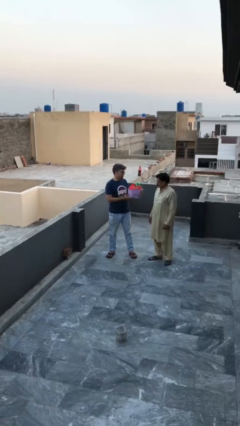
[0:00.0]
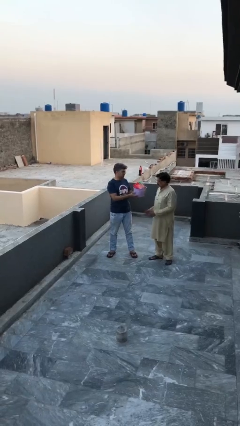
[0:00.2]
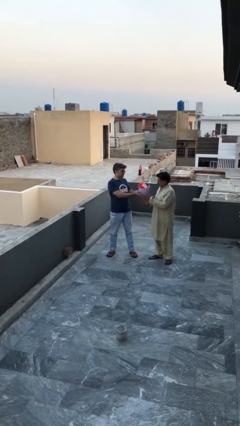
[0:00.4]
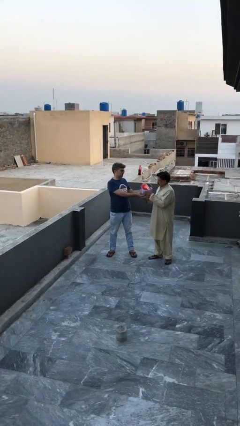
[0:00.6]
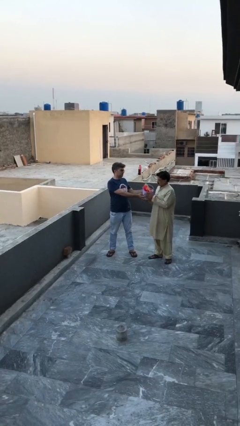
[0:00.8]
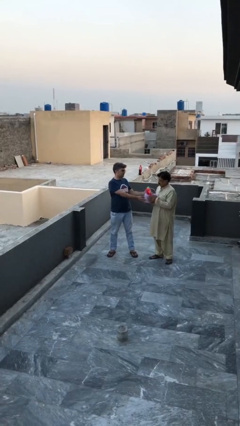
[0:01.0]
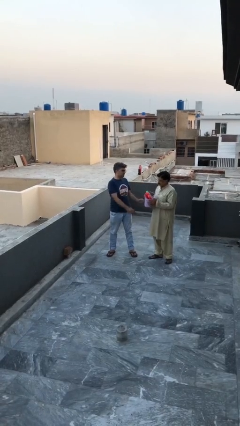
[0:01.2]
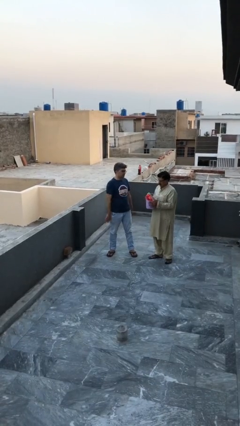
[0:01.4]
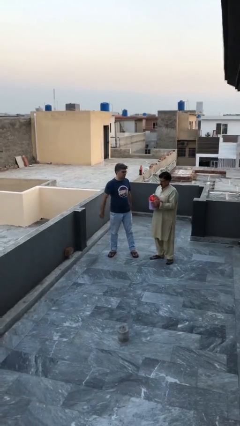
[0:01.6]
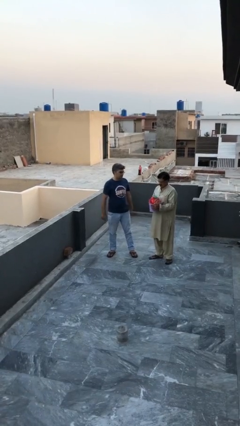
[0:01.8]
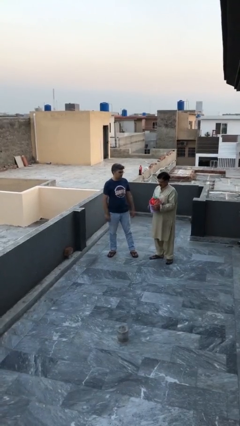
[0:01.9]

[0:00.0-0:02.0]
person transfers object to person

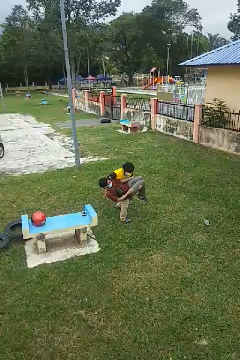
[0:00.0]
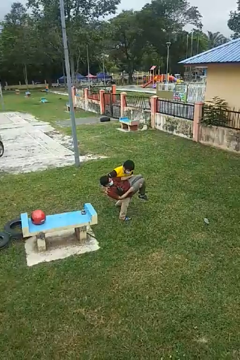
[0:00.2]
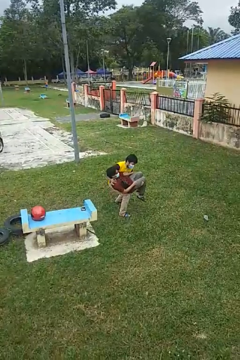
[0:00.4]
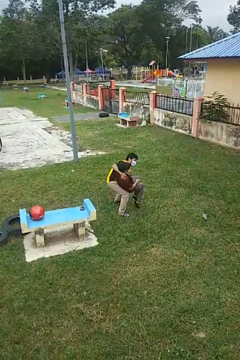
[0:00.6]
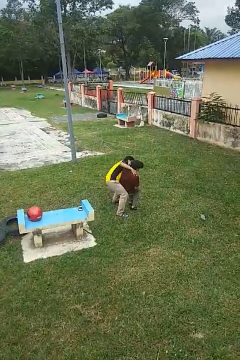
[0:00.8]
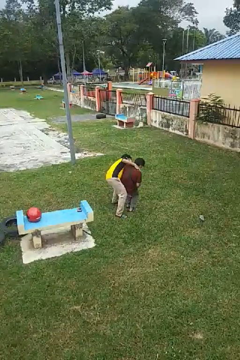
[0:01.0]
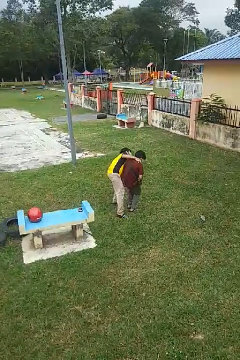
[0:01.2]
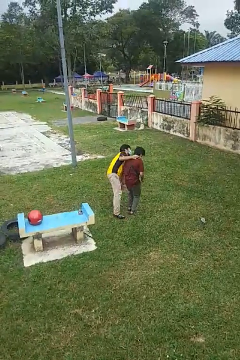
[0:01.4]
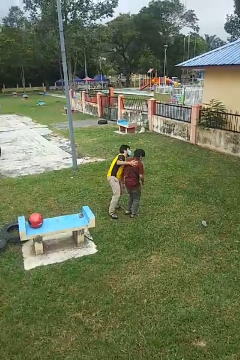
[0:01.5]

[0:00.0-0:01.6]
person puts down person

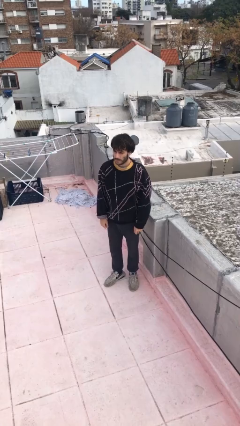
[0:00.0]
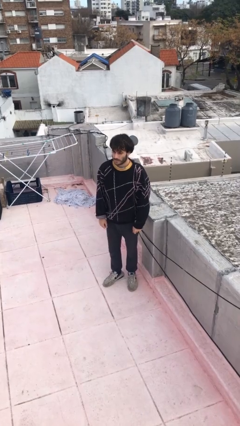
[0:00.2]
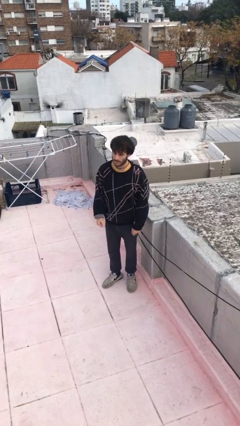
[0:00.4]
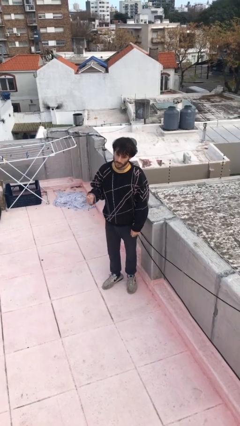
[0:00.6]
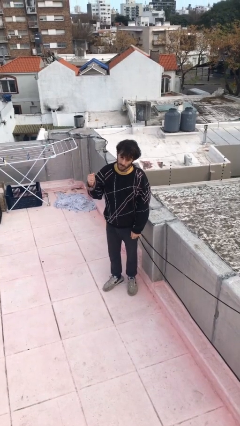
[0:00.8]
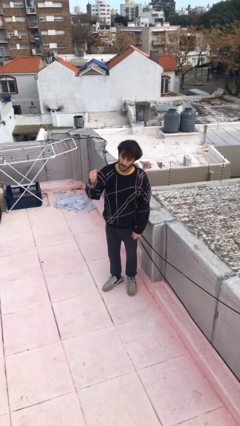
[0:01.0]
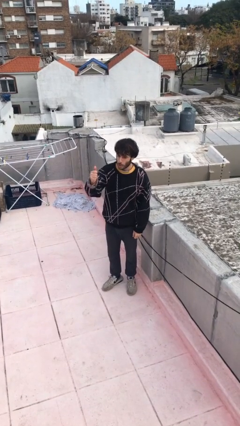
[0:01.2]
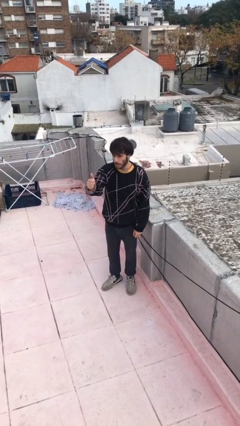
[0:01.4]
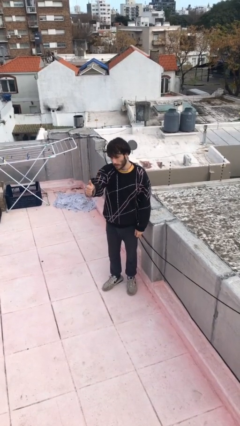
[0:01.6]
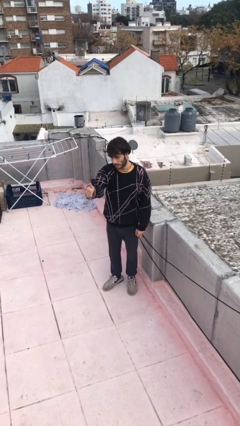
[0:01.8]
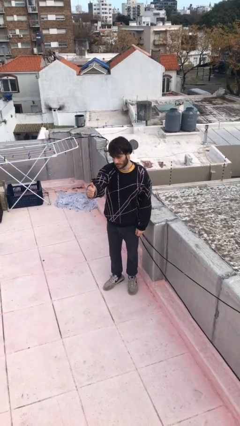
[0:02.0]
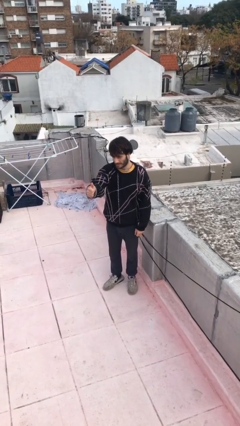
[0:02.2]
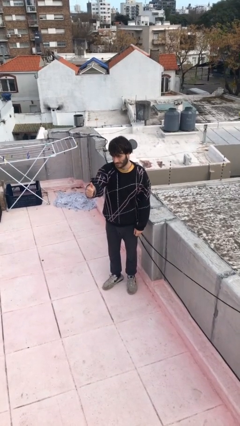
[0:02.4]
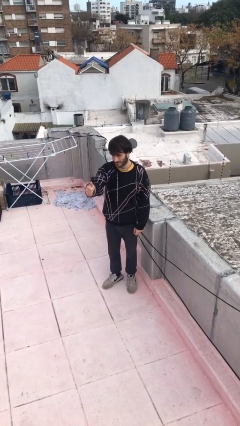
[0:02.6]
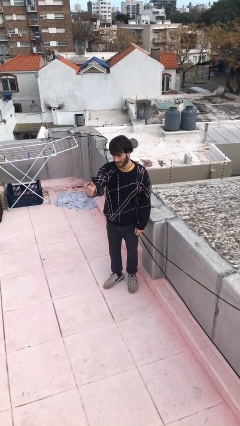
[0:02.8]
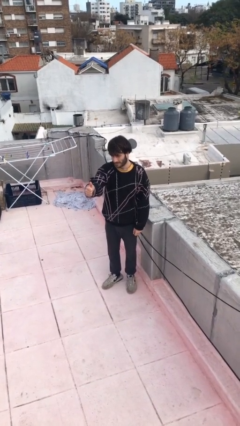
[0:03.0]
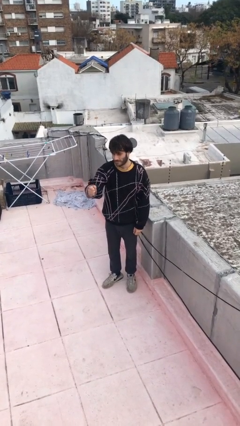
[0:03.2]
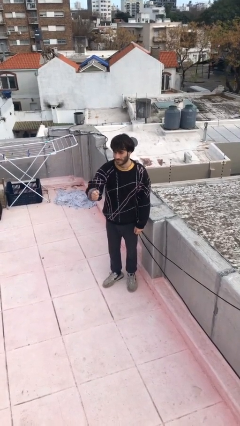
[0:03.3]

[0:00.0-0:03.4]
person gestures thumbs up

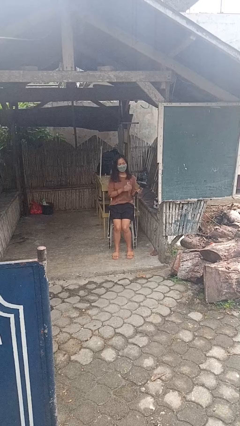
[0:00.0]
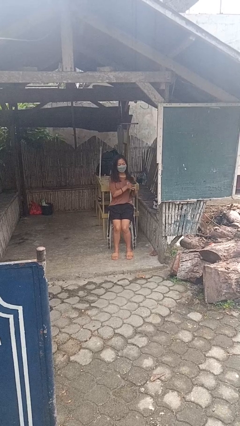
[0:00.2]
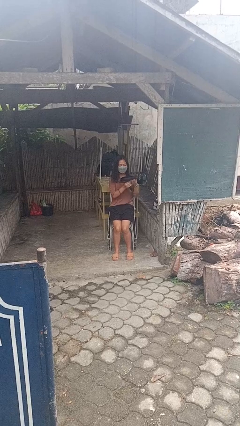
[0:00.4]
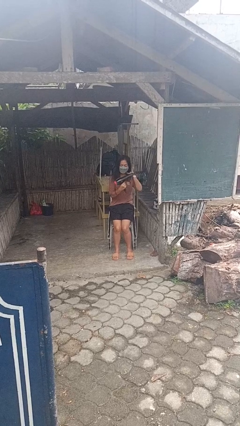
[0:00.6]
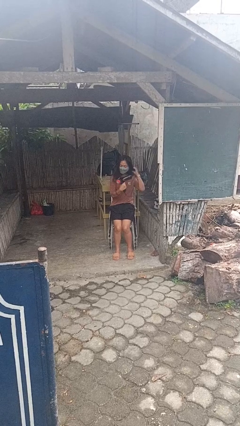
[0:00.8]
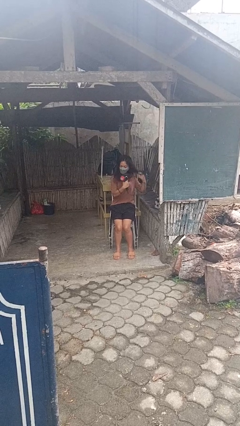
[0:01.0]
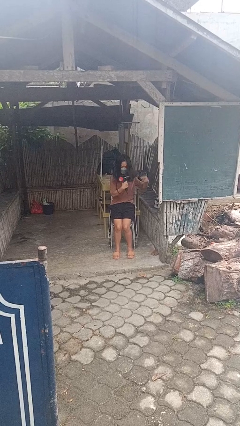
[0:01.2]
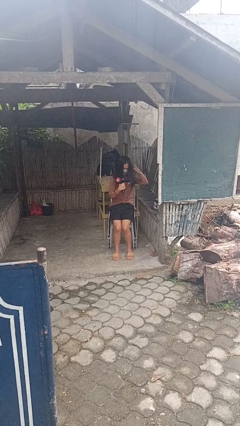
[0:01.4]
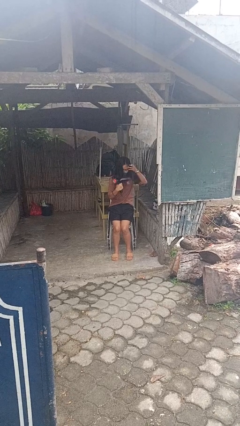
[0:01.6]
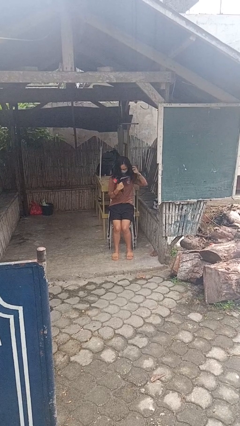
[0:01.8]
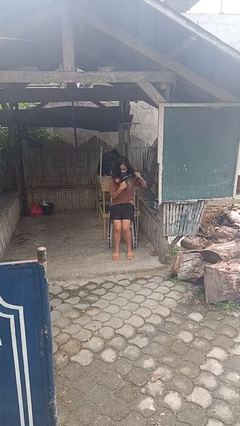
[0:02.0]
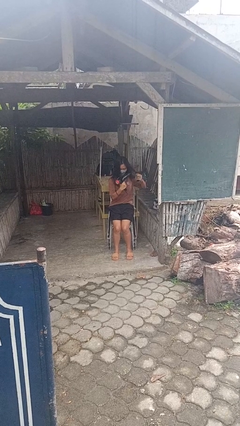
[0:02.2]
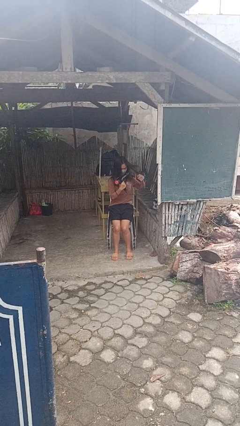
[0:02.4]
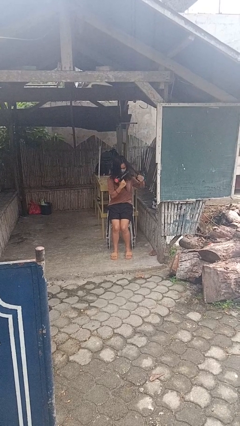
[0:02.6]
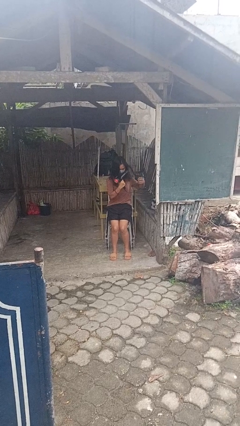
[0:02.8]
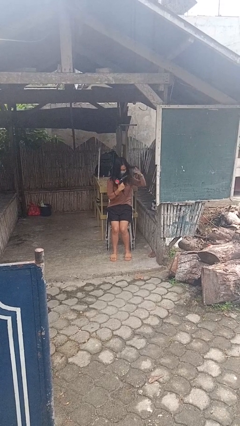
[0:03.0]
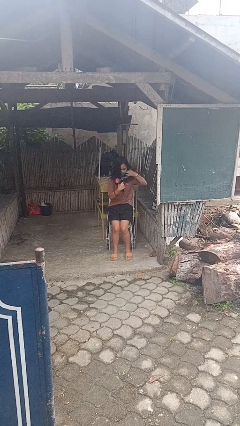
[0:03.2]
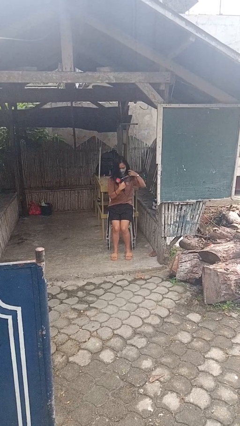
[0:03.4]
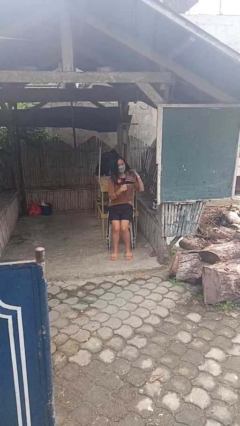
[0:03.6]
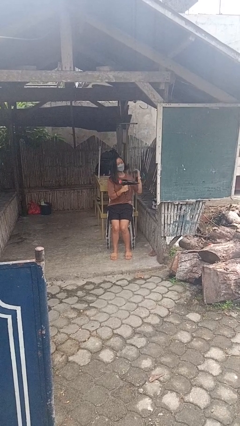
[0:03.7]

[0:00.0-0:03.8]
person dries hair with hairdryer

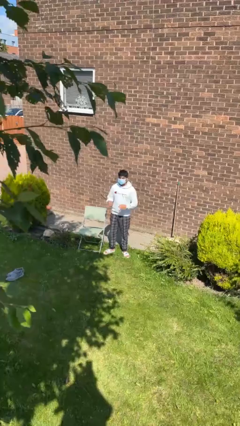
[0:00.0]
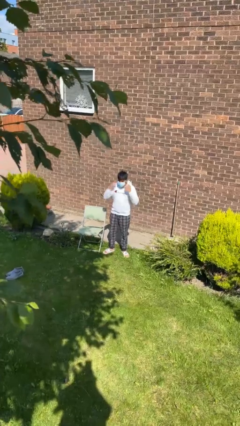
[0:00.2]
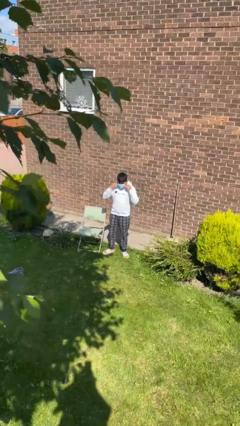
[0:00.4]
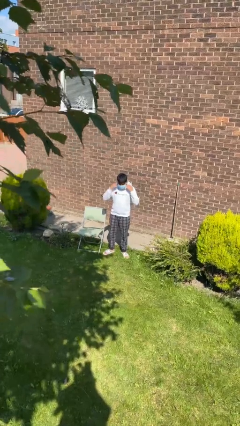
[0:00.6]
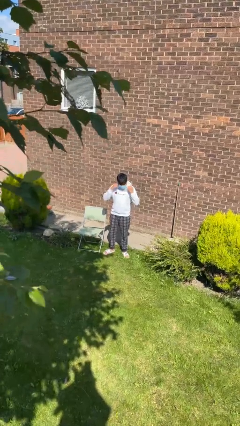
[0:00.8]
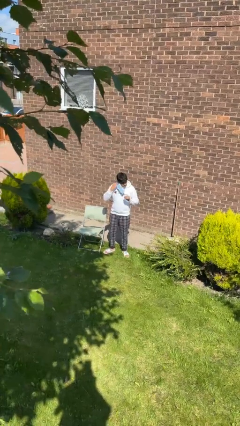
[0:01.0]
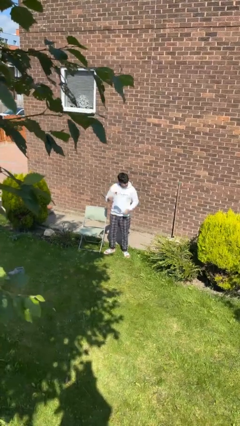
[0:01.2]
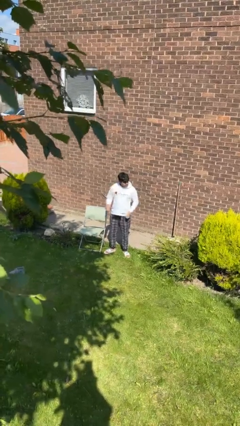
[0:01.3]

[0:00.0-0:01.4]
person takes off facemask

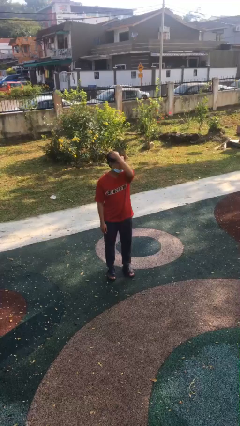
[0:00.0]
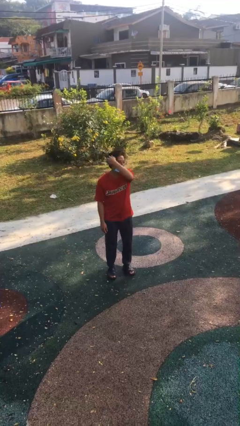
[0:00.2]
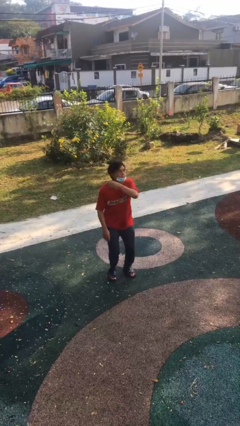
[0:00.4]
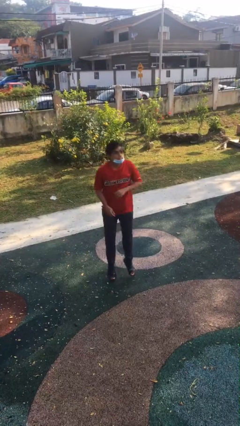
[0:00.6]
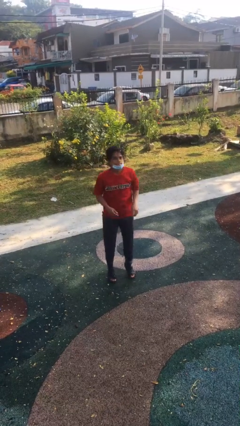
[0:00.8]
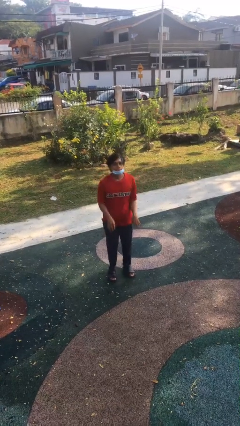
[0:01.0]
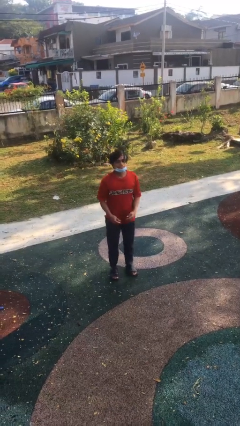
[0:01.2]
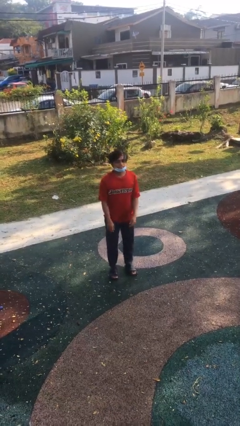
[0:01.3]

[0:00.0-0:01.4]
person jumps

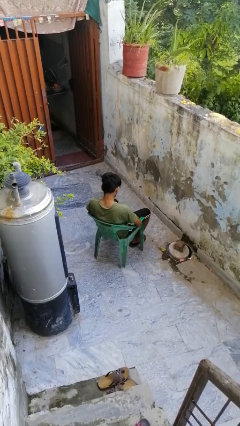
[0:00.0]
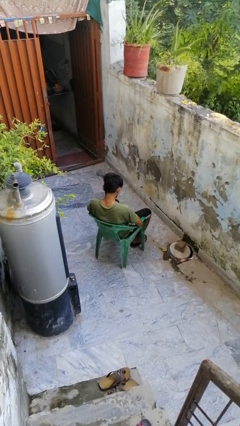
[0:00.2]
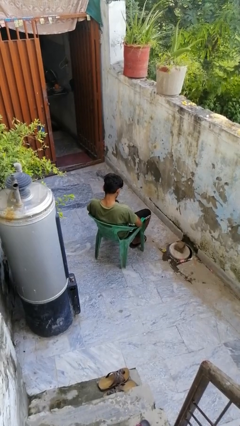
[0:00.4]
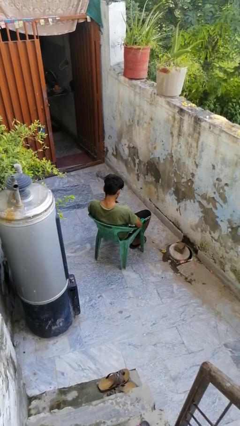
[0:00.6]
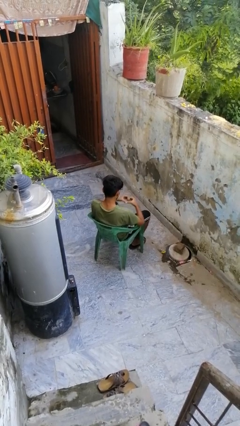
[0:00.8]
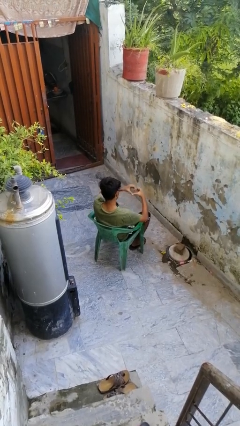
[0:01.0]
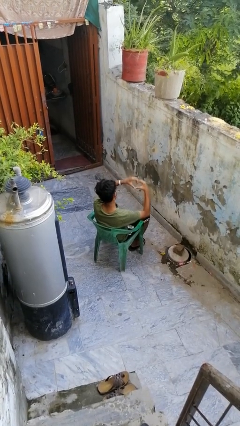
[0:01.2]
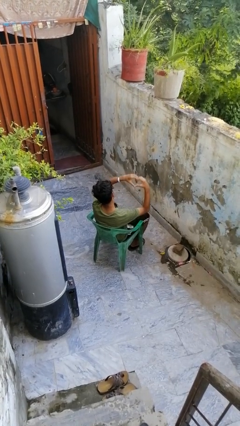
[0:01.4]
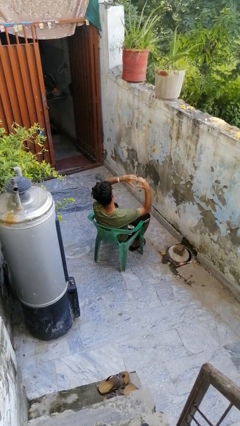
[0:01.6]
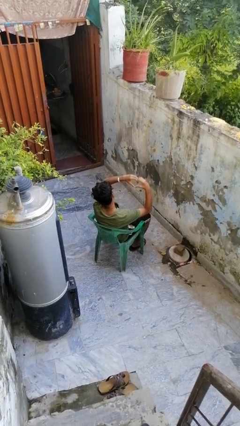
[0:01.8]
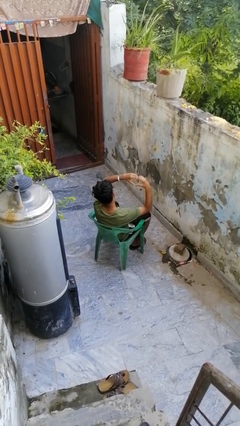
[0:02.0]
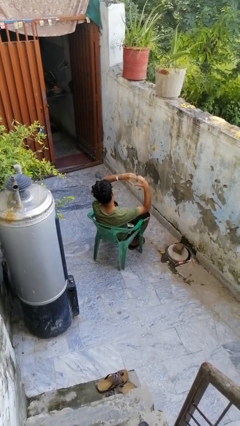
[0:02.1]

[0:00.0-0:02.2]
person gestures heart

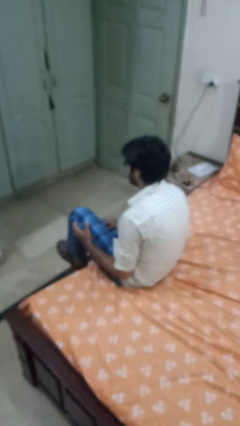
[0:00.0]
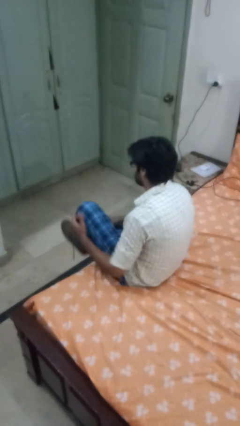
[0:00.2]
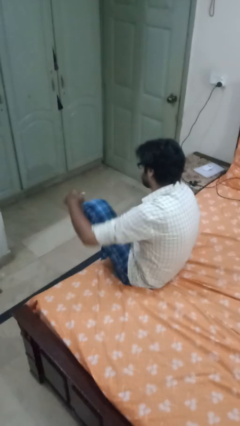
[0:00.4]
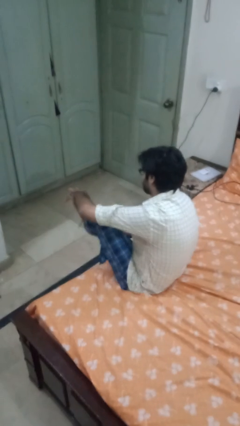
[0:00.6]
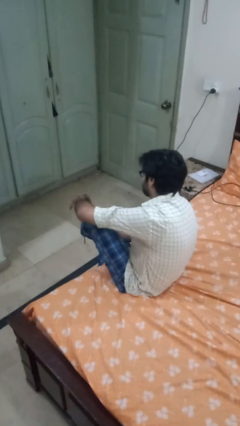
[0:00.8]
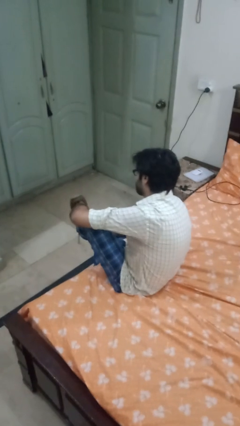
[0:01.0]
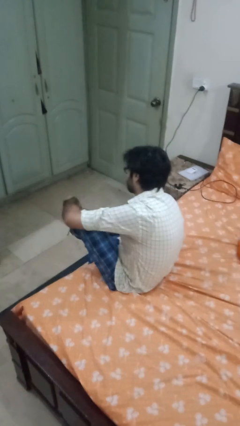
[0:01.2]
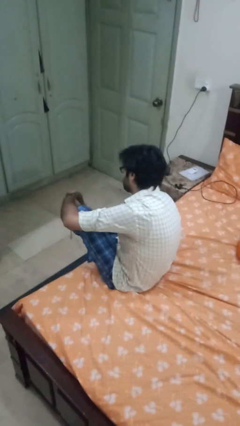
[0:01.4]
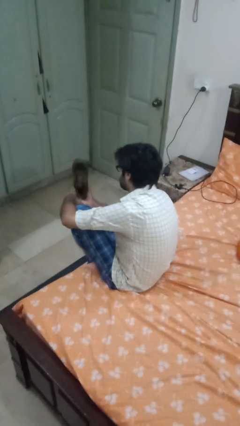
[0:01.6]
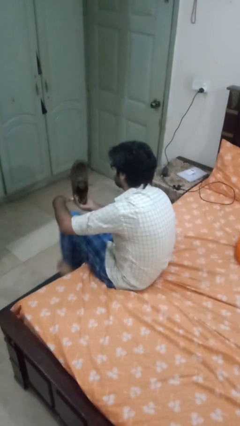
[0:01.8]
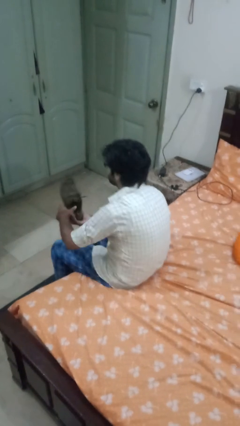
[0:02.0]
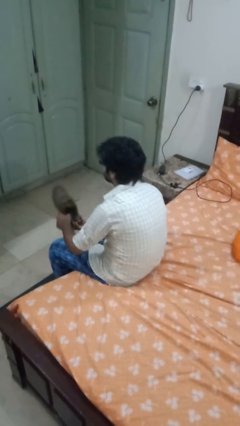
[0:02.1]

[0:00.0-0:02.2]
person takes off shoes
